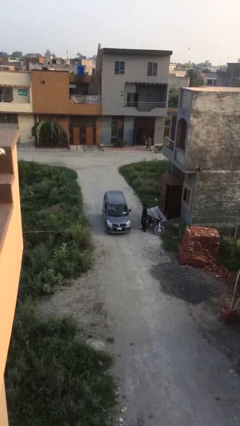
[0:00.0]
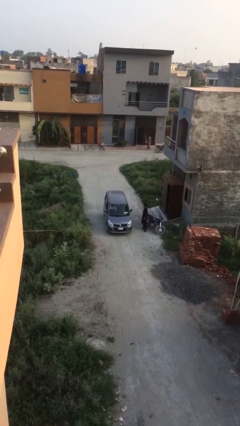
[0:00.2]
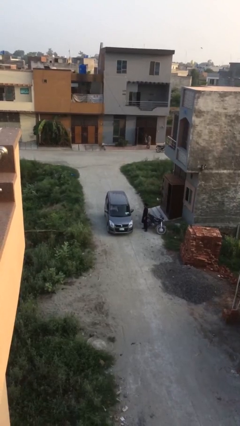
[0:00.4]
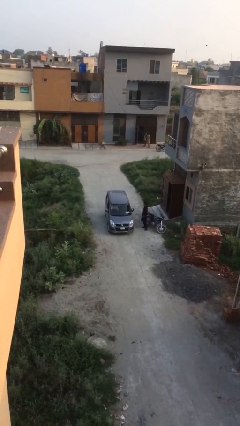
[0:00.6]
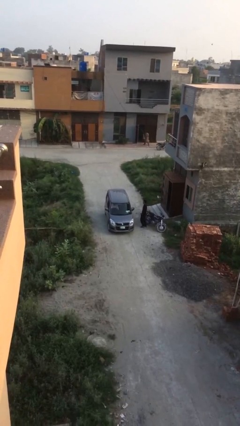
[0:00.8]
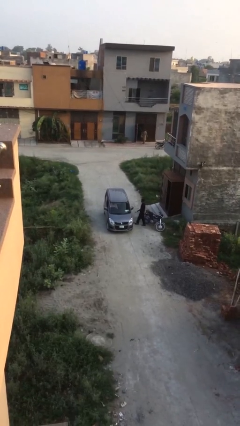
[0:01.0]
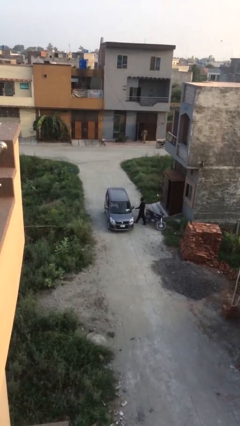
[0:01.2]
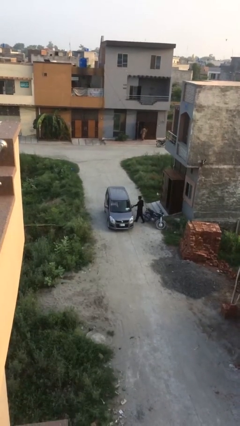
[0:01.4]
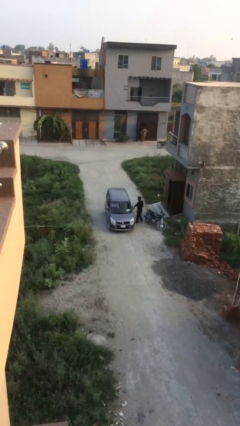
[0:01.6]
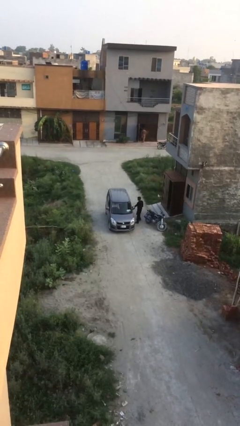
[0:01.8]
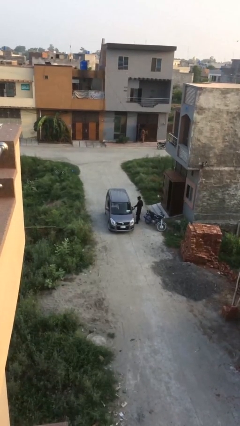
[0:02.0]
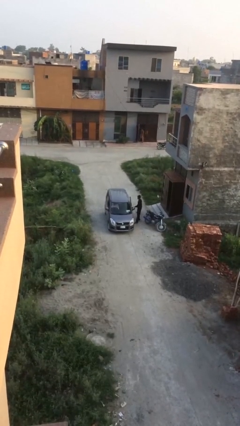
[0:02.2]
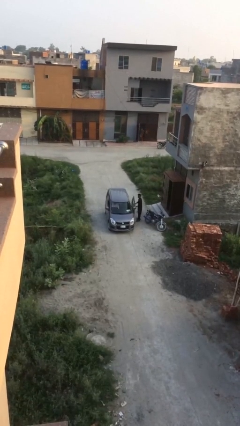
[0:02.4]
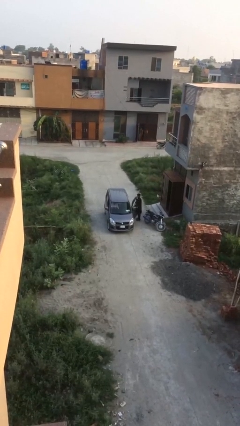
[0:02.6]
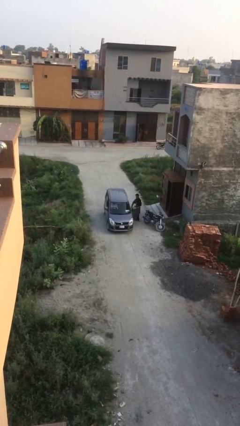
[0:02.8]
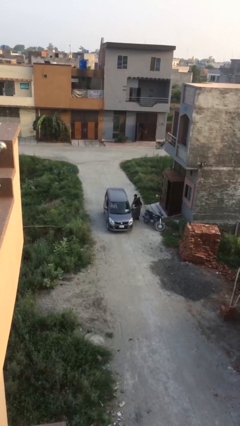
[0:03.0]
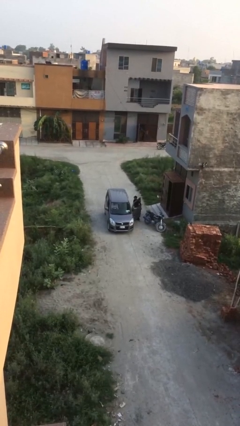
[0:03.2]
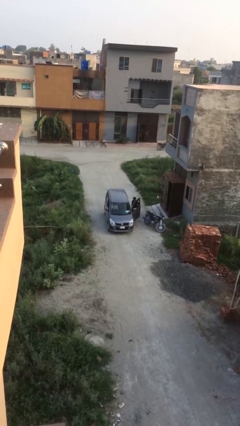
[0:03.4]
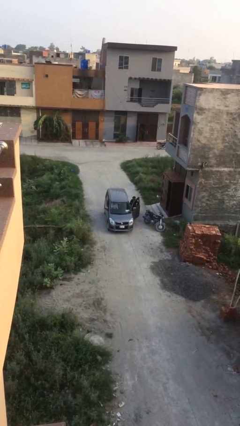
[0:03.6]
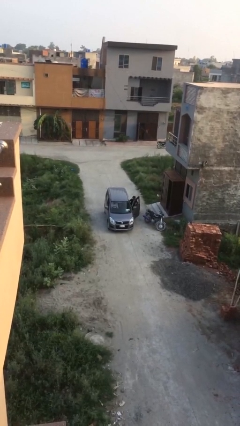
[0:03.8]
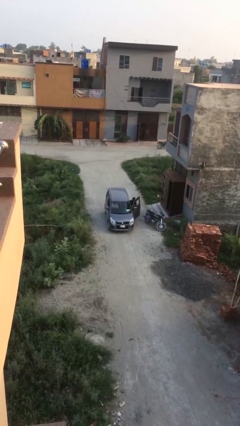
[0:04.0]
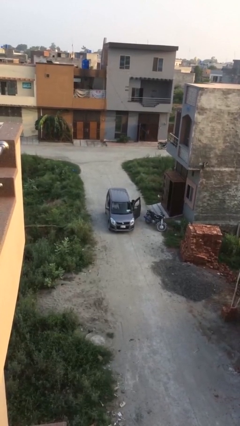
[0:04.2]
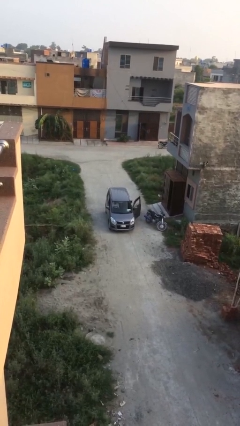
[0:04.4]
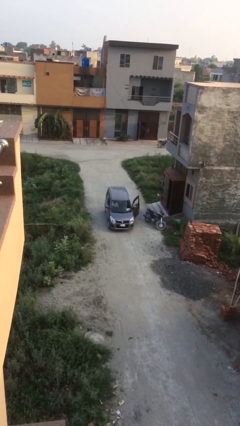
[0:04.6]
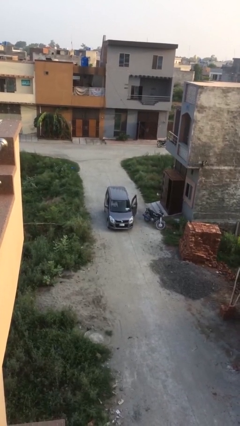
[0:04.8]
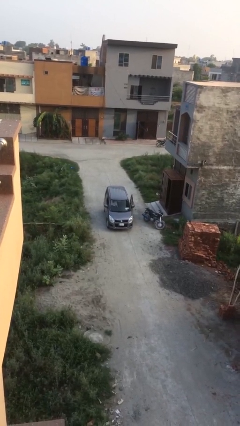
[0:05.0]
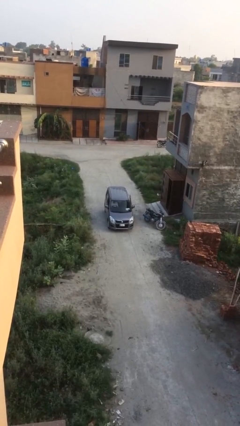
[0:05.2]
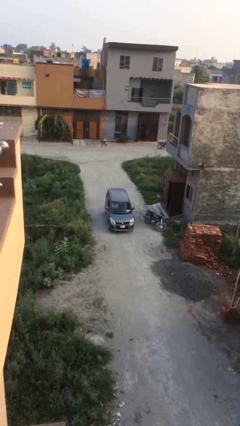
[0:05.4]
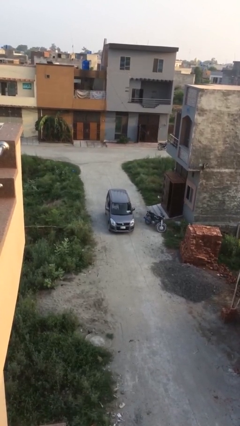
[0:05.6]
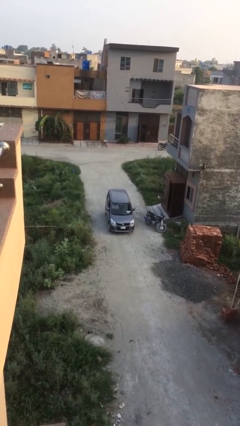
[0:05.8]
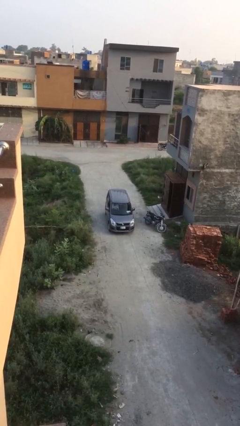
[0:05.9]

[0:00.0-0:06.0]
car picks up person

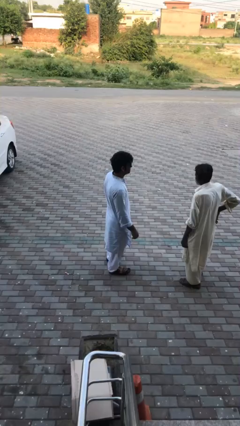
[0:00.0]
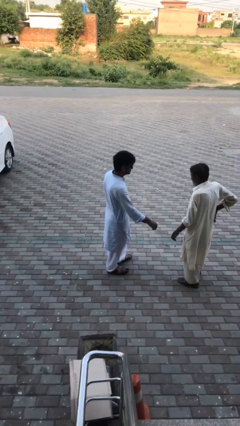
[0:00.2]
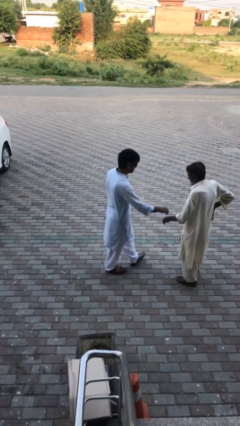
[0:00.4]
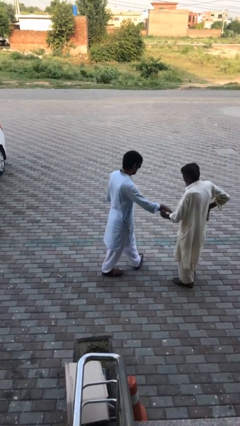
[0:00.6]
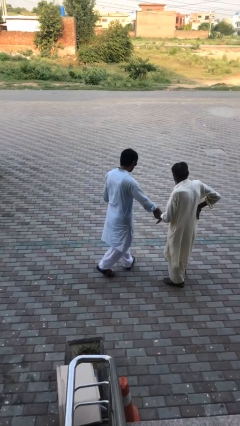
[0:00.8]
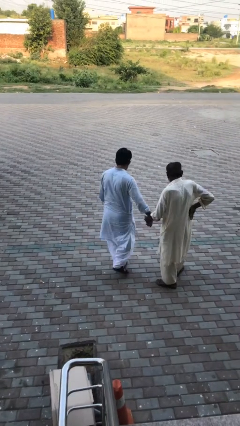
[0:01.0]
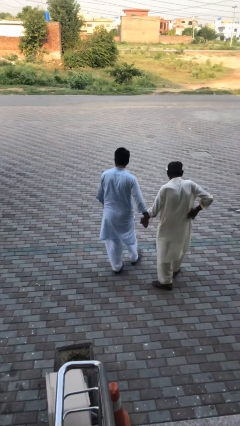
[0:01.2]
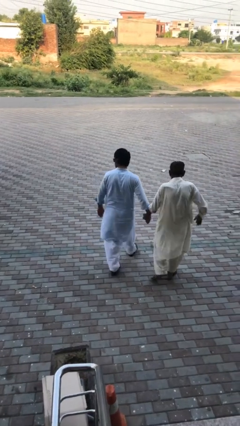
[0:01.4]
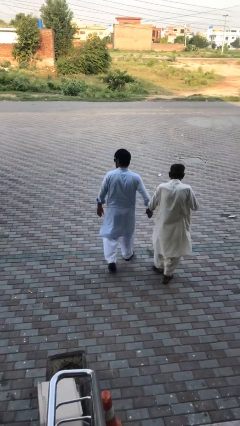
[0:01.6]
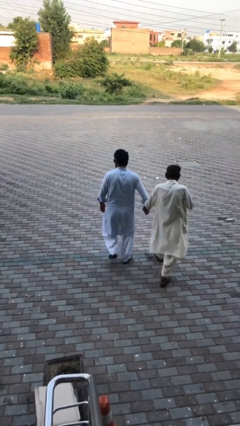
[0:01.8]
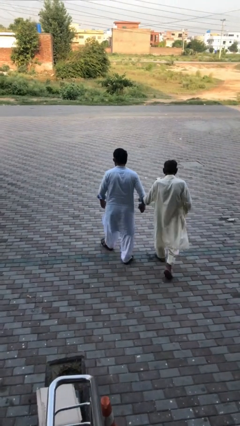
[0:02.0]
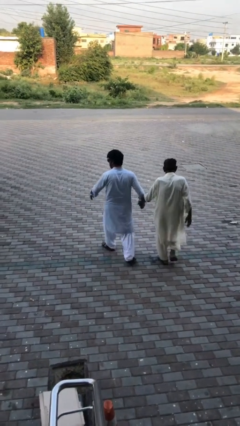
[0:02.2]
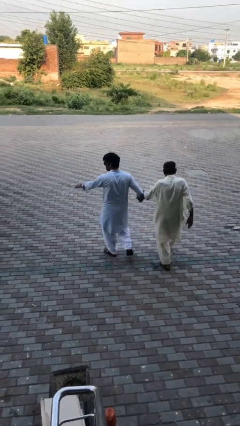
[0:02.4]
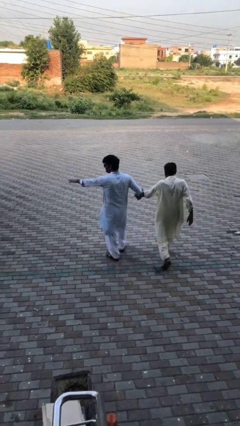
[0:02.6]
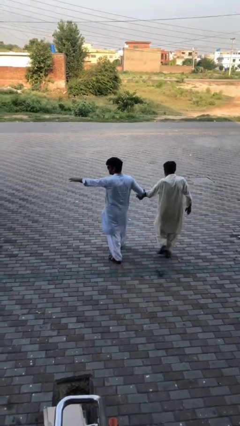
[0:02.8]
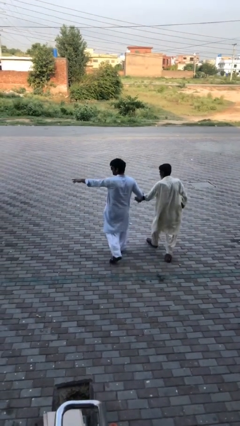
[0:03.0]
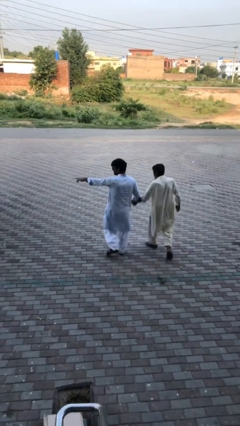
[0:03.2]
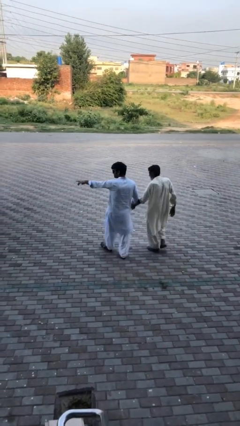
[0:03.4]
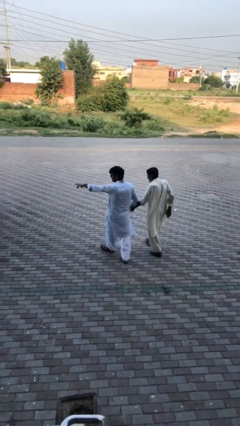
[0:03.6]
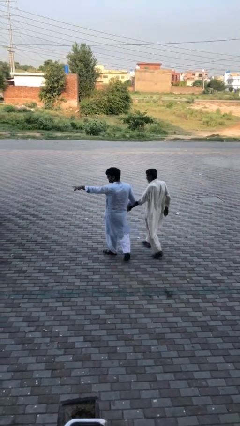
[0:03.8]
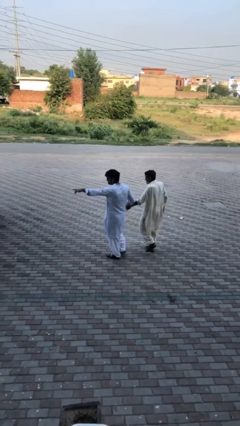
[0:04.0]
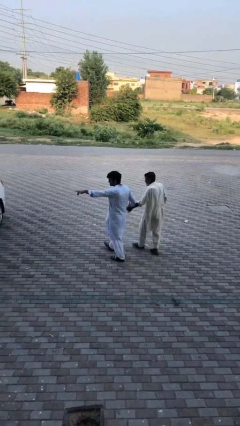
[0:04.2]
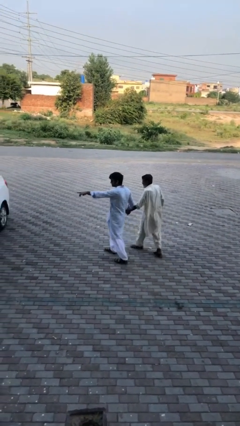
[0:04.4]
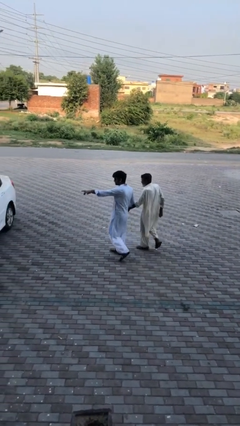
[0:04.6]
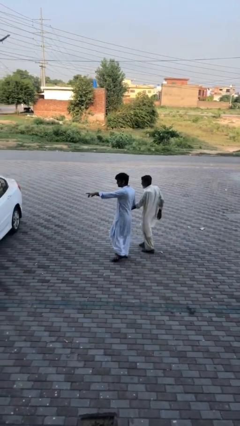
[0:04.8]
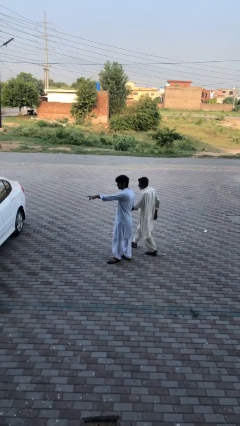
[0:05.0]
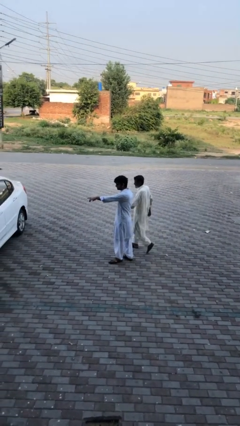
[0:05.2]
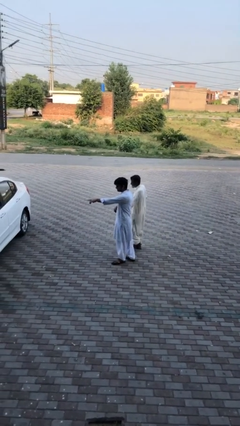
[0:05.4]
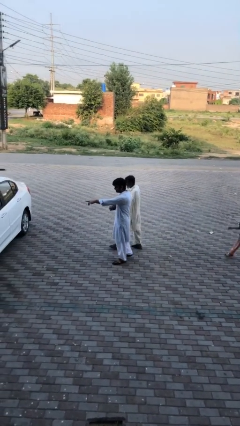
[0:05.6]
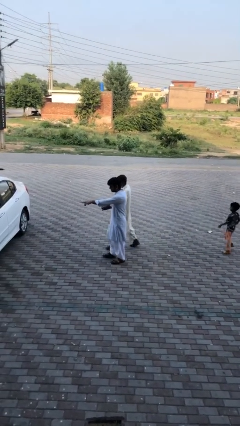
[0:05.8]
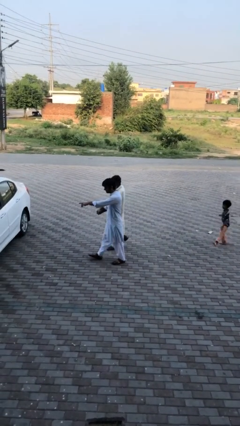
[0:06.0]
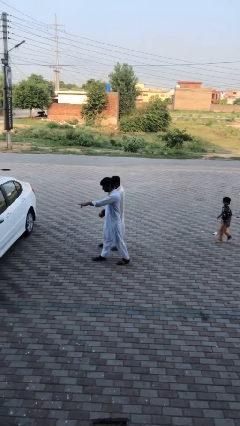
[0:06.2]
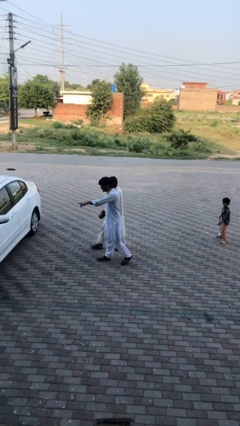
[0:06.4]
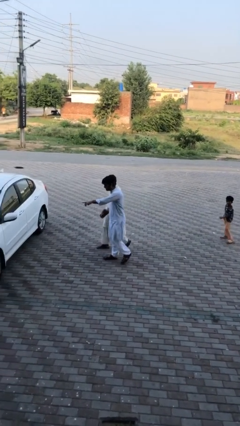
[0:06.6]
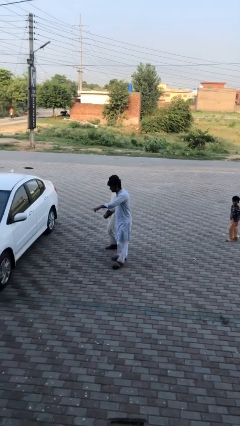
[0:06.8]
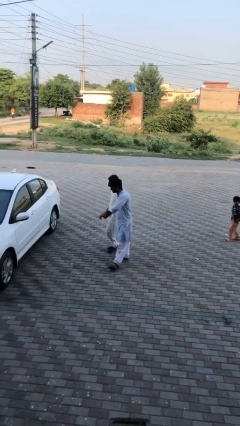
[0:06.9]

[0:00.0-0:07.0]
person holds hand

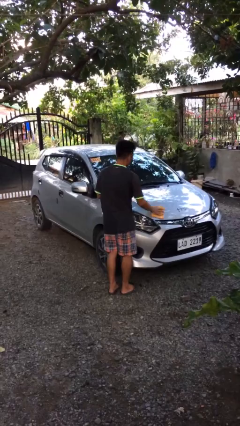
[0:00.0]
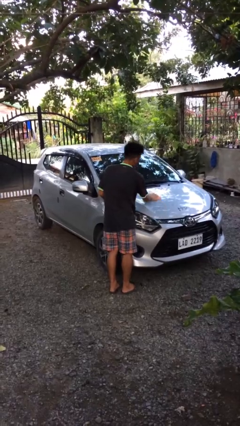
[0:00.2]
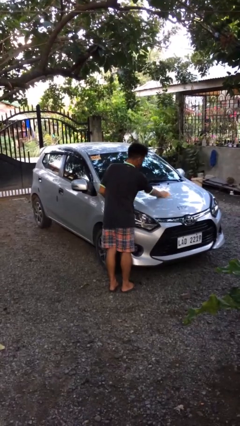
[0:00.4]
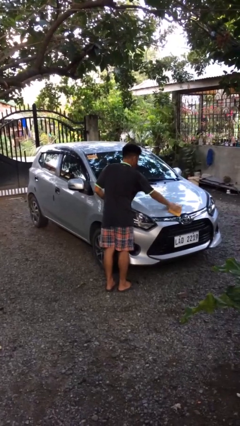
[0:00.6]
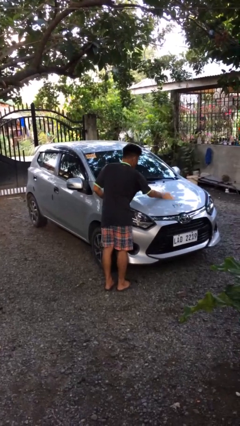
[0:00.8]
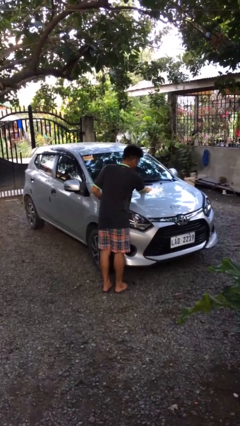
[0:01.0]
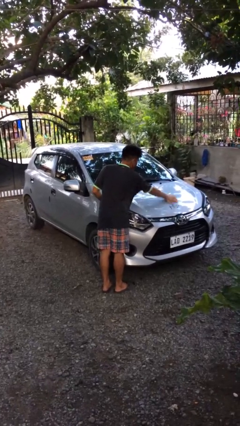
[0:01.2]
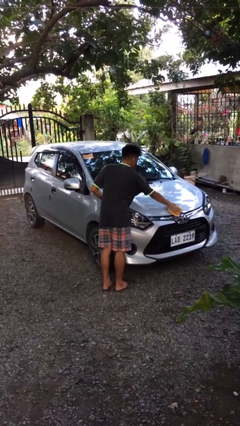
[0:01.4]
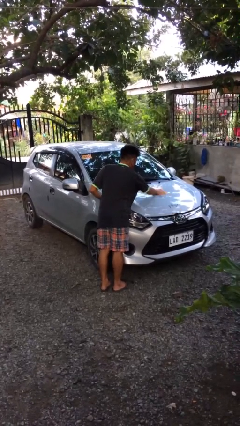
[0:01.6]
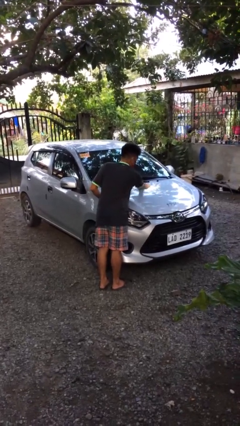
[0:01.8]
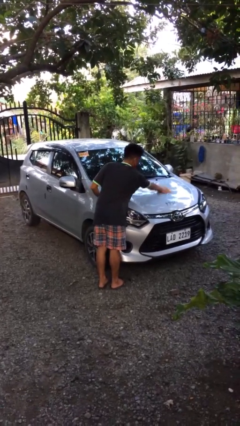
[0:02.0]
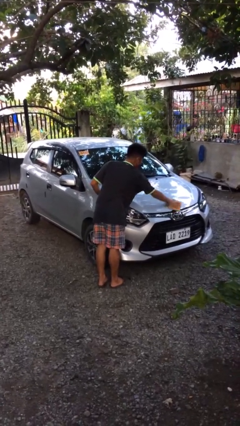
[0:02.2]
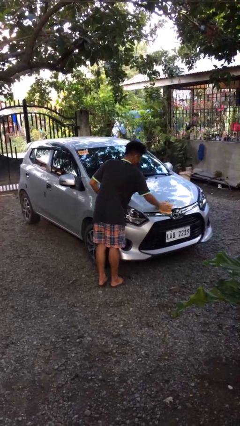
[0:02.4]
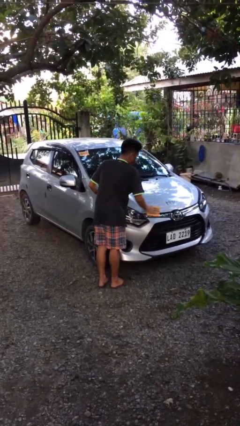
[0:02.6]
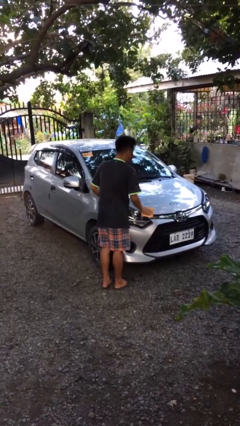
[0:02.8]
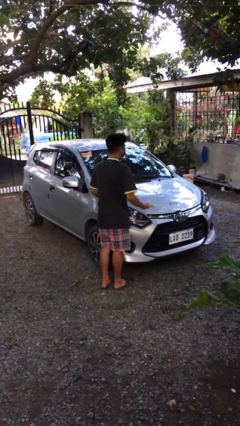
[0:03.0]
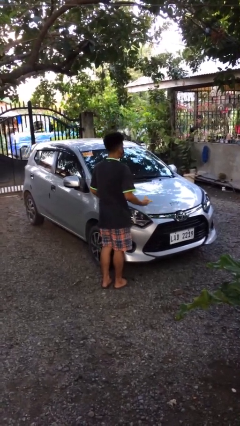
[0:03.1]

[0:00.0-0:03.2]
person polishes car with rag

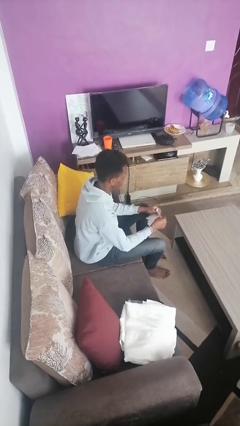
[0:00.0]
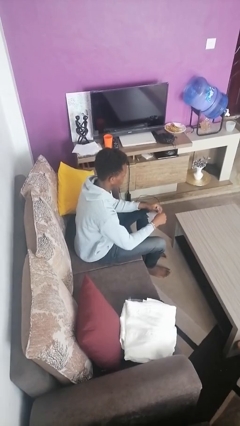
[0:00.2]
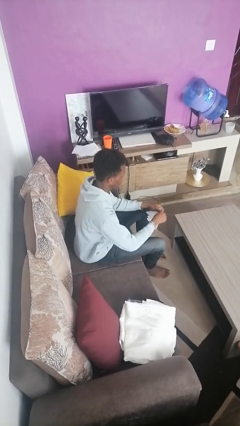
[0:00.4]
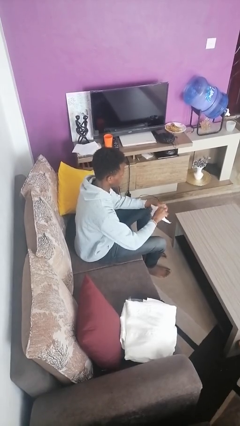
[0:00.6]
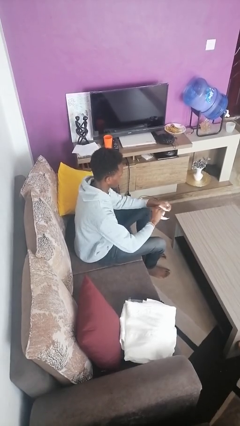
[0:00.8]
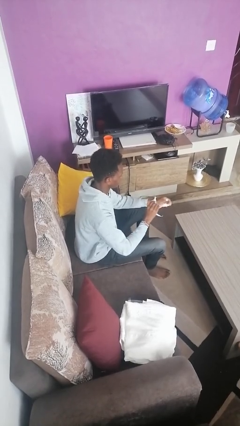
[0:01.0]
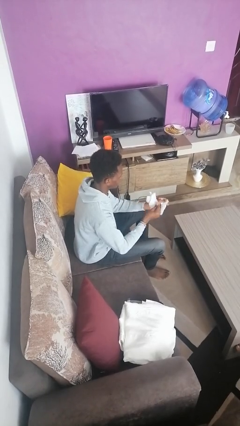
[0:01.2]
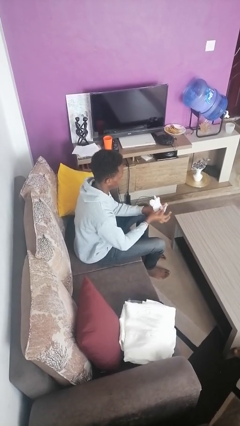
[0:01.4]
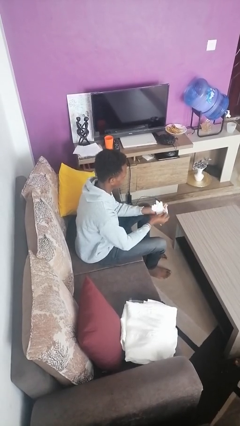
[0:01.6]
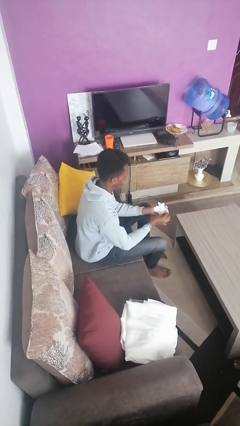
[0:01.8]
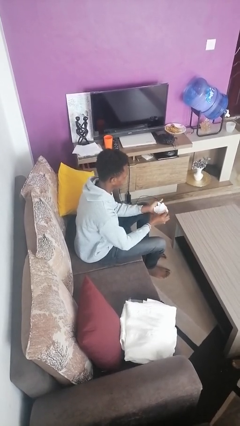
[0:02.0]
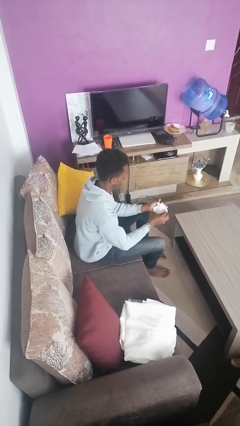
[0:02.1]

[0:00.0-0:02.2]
person tears paper
